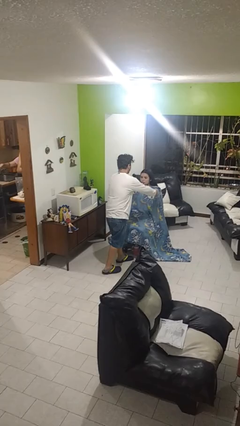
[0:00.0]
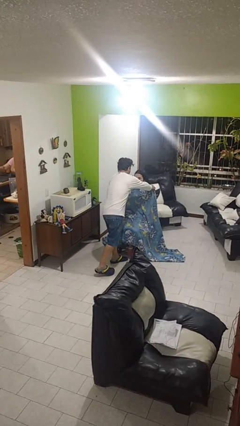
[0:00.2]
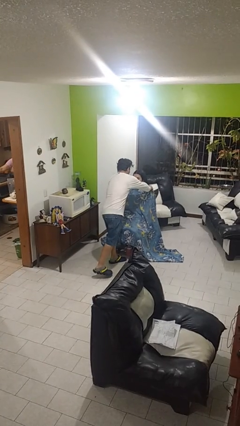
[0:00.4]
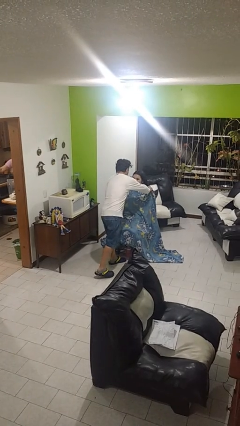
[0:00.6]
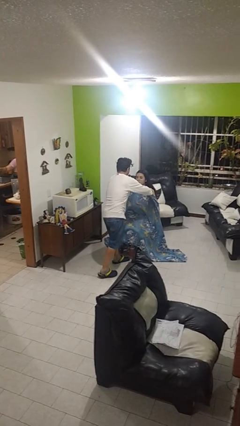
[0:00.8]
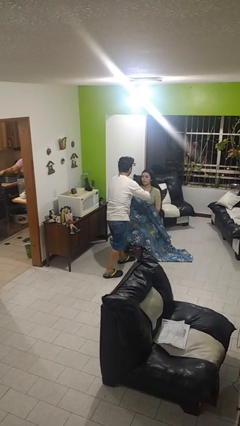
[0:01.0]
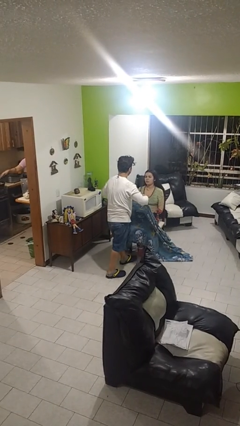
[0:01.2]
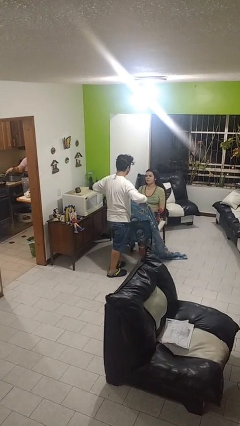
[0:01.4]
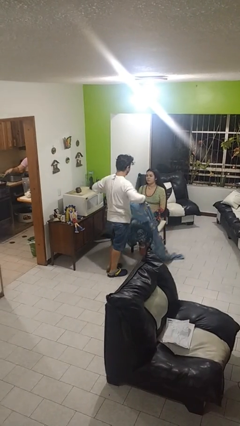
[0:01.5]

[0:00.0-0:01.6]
person uncovers friend with blanket

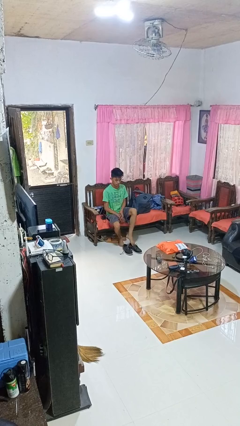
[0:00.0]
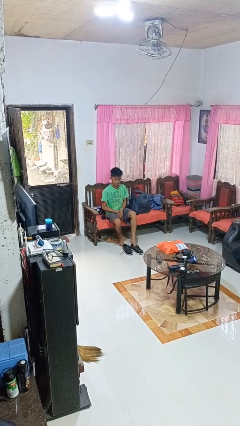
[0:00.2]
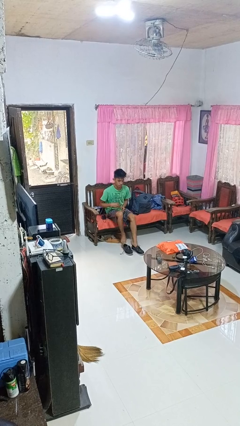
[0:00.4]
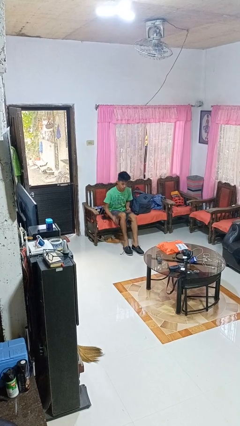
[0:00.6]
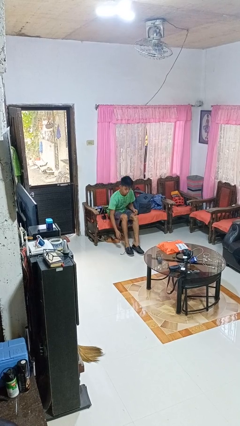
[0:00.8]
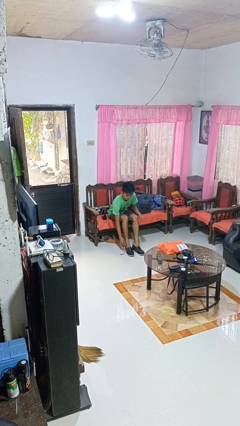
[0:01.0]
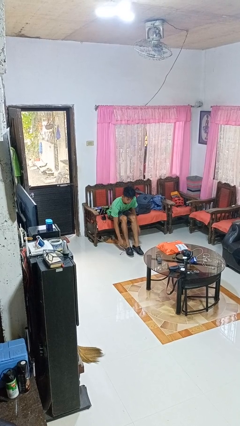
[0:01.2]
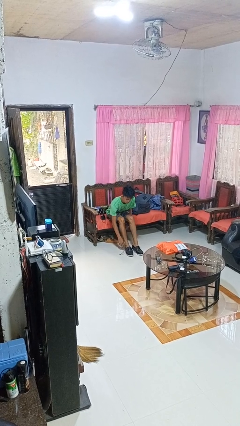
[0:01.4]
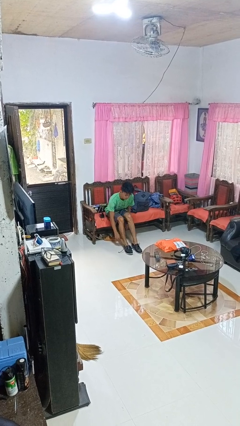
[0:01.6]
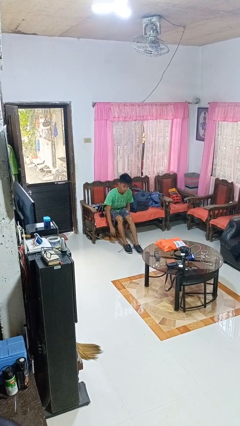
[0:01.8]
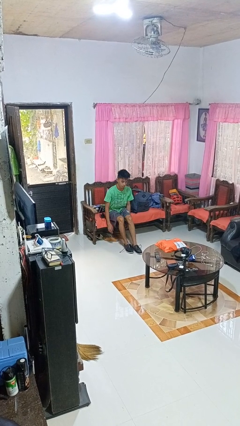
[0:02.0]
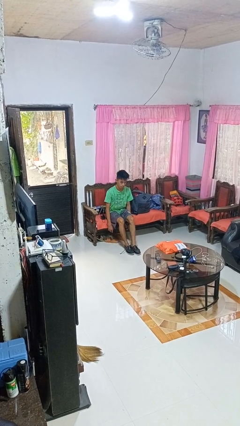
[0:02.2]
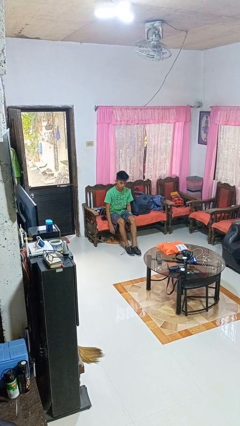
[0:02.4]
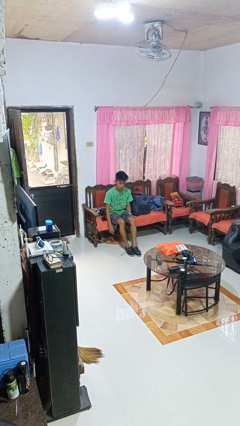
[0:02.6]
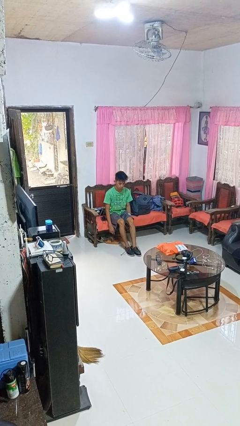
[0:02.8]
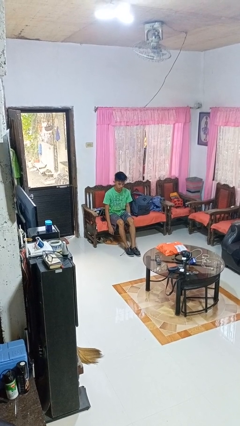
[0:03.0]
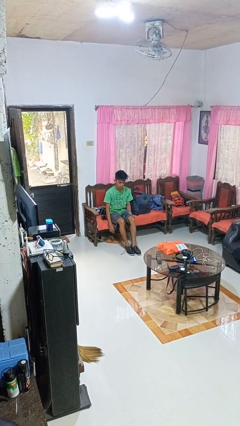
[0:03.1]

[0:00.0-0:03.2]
person puts on shoes

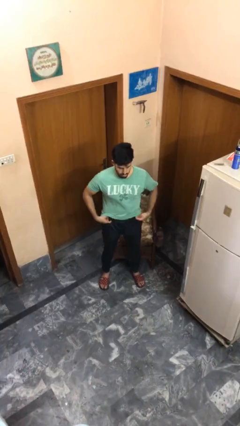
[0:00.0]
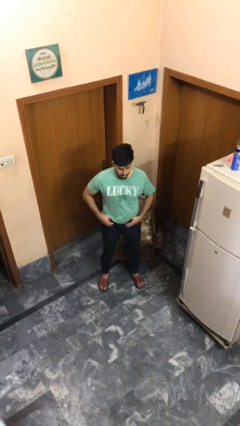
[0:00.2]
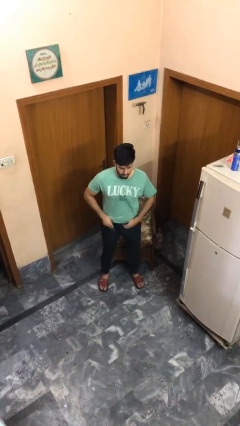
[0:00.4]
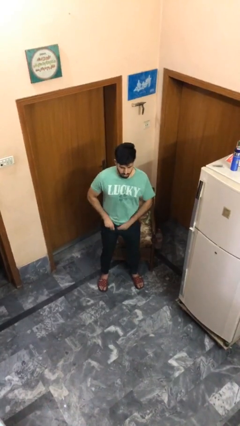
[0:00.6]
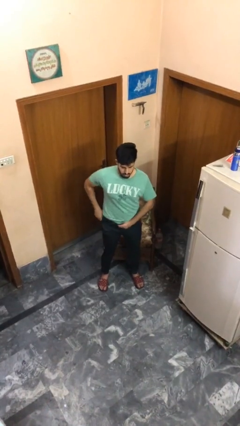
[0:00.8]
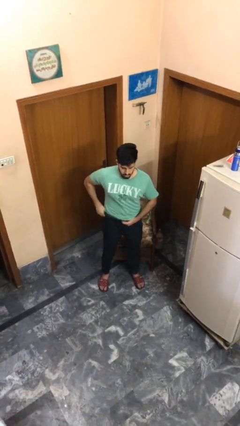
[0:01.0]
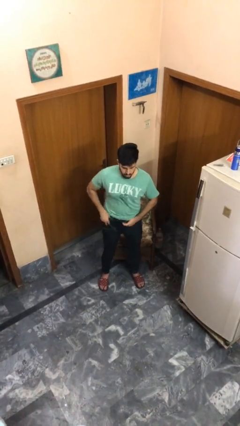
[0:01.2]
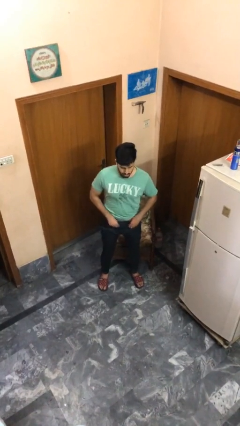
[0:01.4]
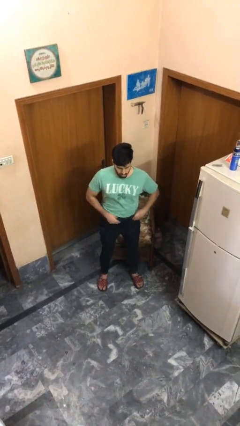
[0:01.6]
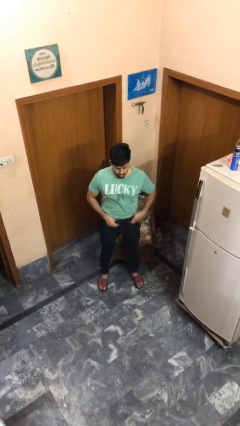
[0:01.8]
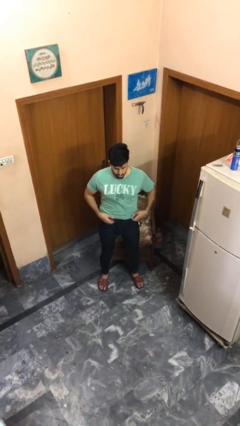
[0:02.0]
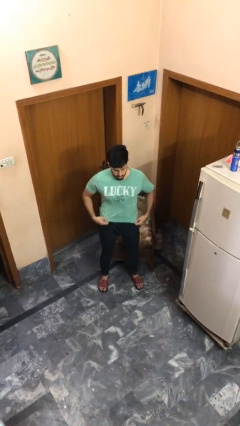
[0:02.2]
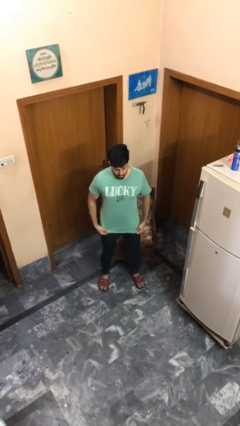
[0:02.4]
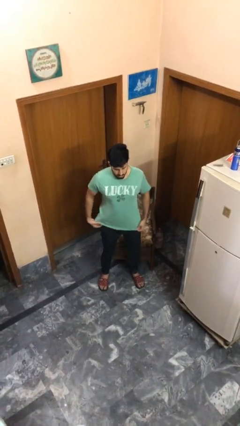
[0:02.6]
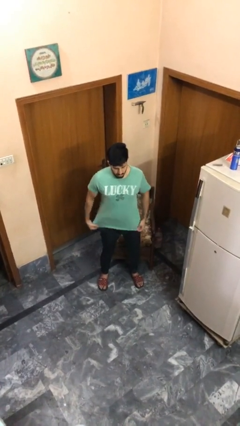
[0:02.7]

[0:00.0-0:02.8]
person hikes up pants

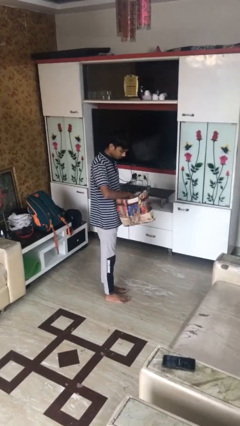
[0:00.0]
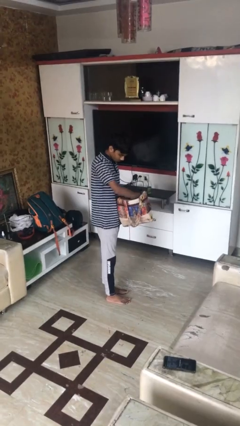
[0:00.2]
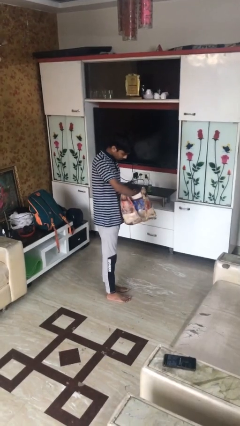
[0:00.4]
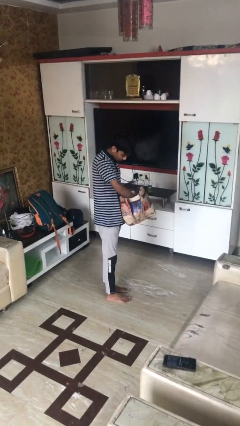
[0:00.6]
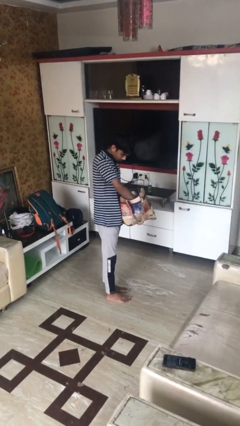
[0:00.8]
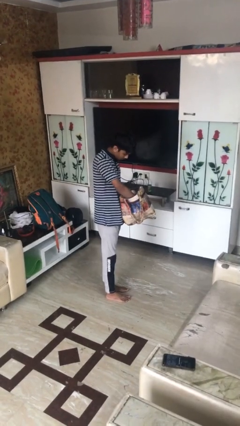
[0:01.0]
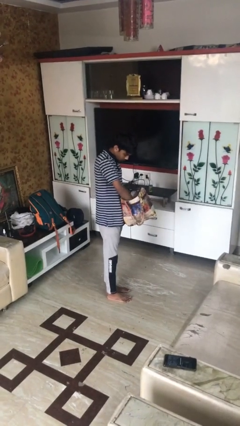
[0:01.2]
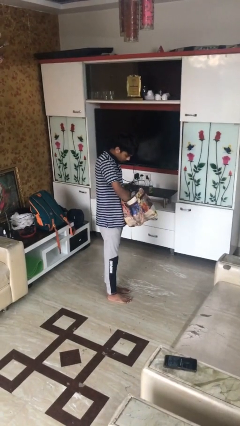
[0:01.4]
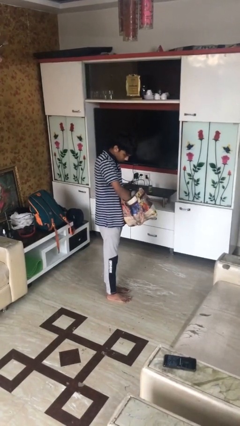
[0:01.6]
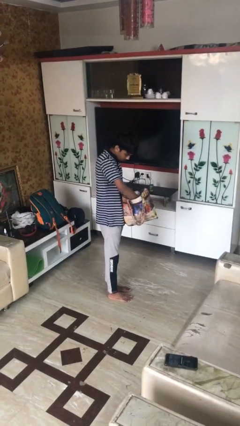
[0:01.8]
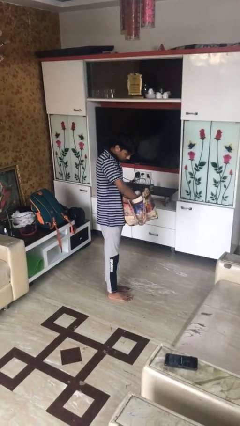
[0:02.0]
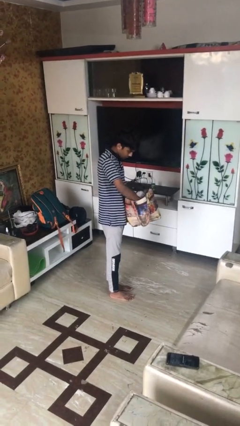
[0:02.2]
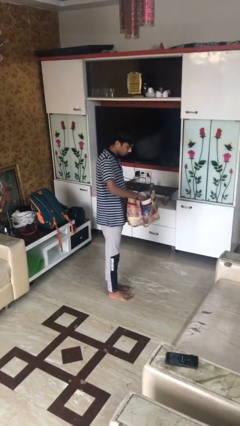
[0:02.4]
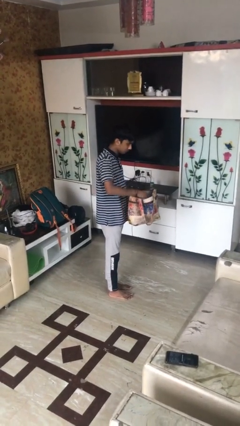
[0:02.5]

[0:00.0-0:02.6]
person searches in purse

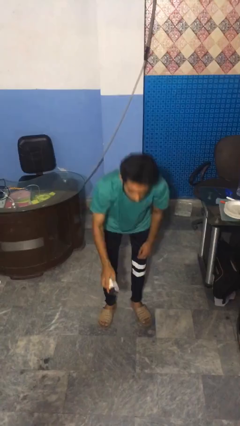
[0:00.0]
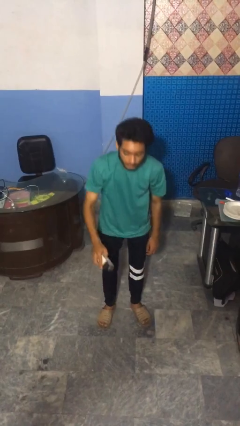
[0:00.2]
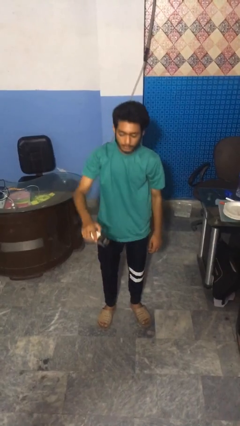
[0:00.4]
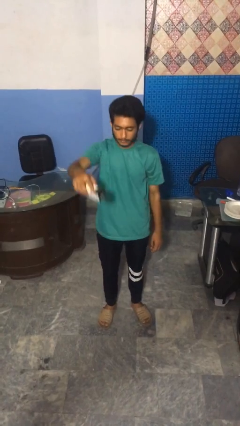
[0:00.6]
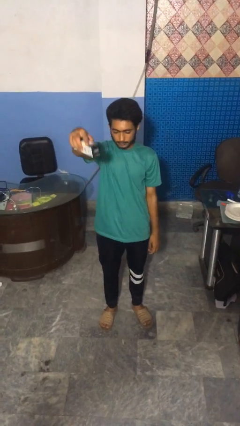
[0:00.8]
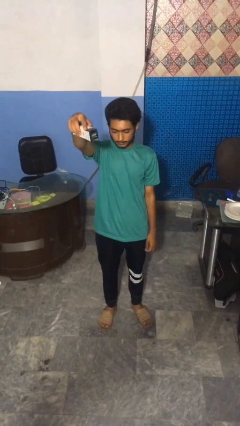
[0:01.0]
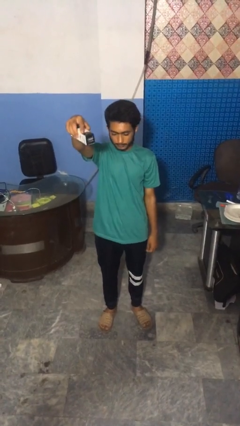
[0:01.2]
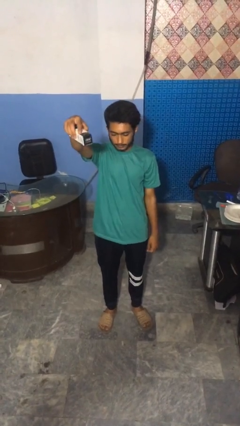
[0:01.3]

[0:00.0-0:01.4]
person picks up object from floor

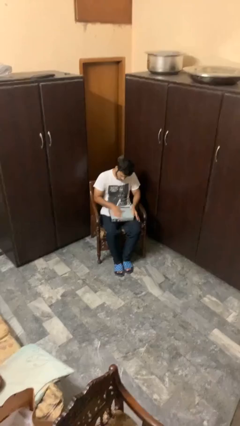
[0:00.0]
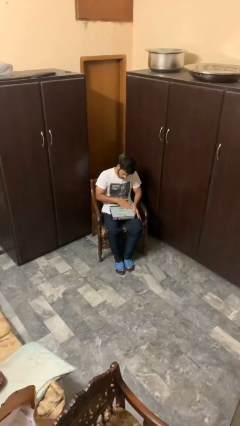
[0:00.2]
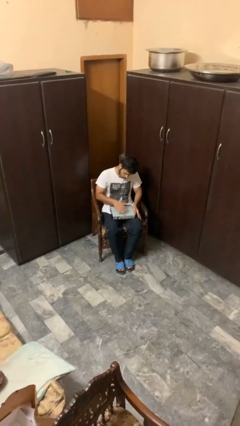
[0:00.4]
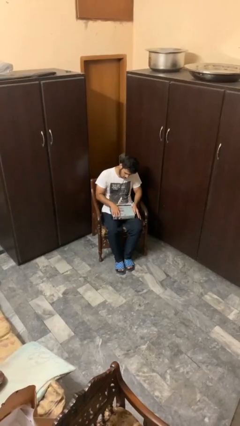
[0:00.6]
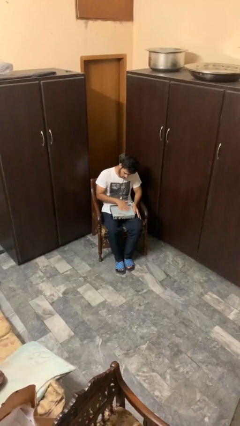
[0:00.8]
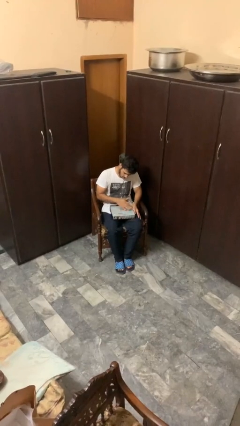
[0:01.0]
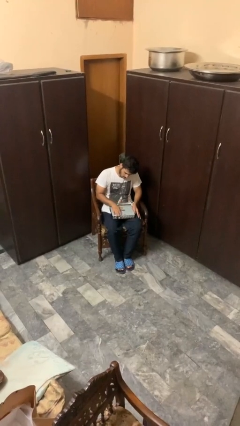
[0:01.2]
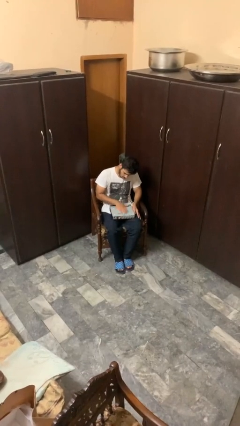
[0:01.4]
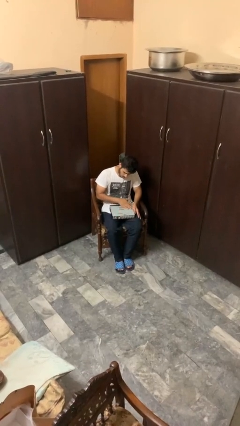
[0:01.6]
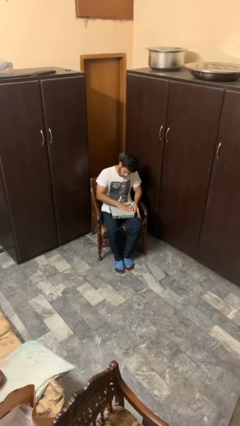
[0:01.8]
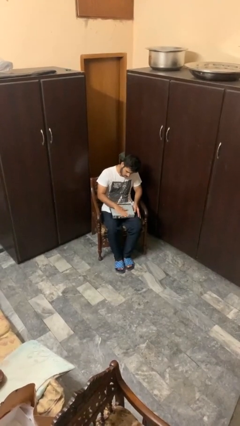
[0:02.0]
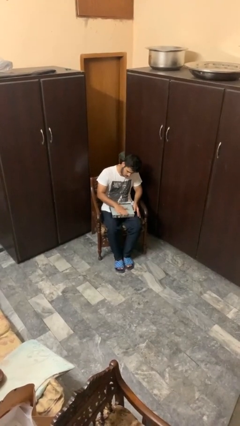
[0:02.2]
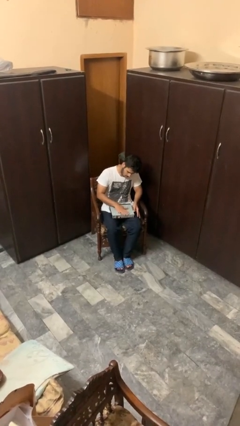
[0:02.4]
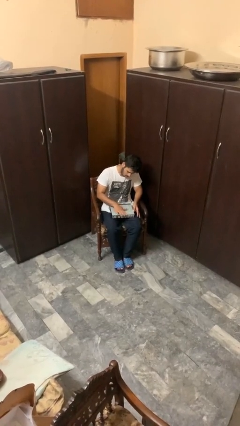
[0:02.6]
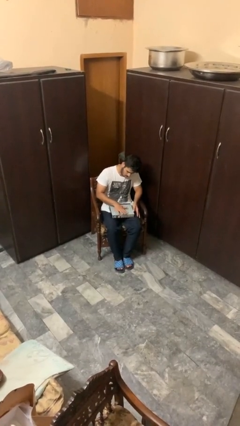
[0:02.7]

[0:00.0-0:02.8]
person waves hand over object

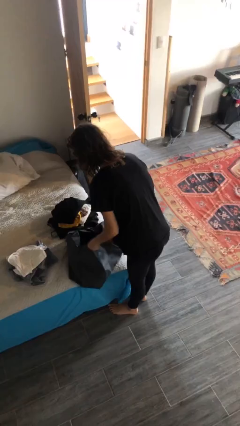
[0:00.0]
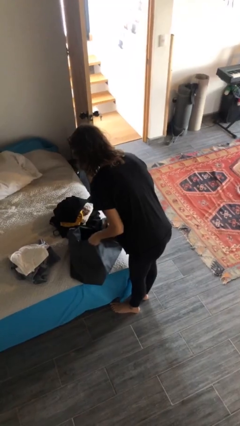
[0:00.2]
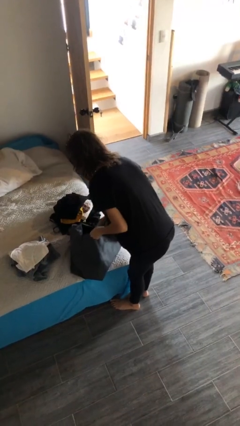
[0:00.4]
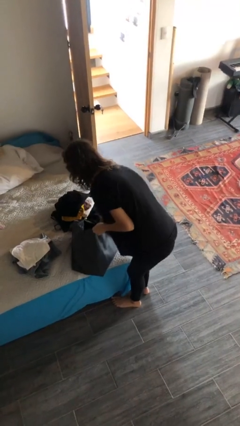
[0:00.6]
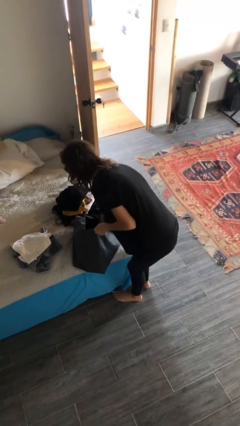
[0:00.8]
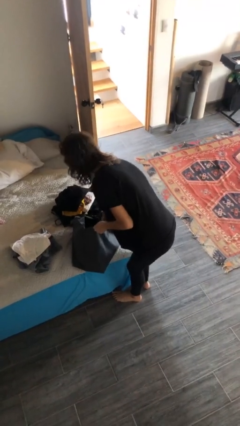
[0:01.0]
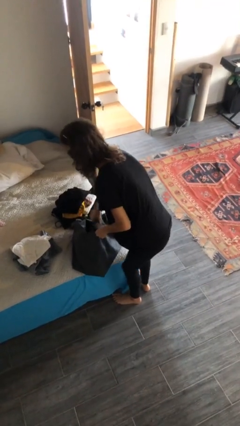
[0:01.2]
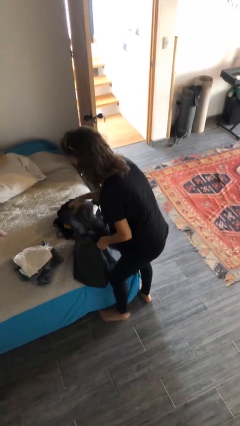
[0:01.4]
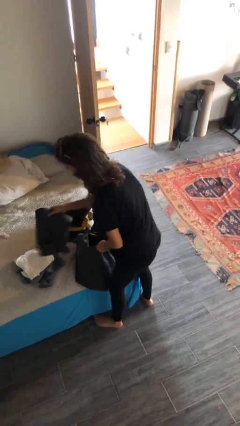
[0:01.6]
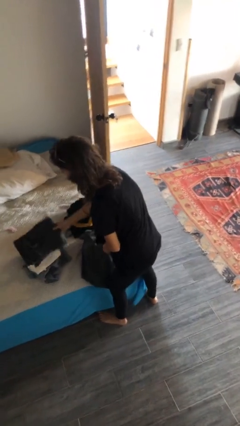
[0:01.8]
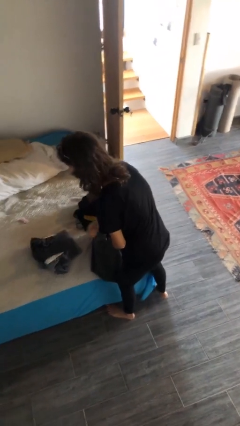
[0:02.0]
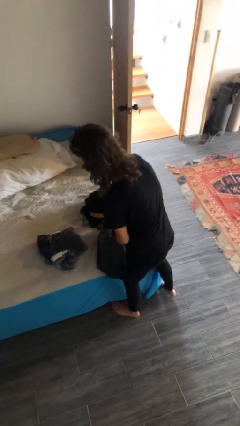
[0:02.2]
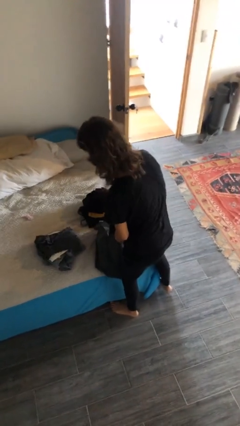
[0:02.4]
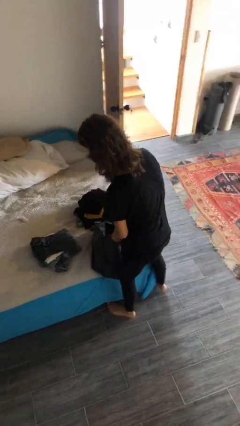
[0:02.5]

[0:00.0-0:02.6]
person unloads clothes from suitcase
